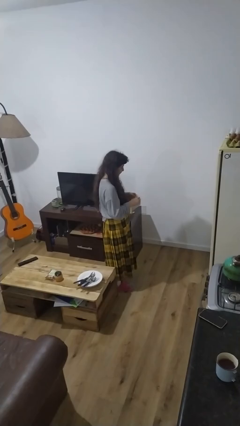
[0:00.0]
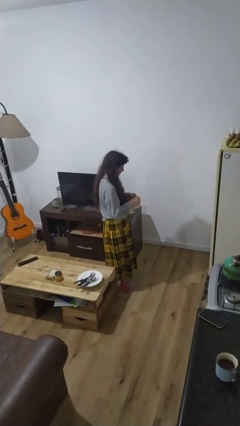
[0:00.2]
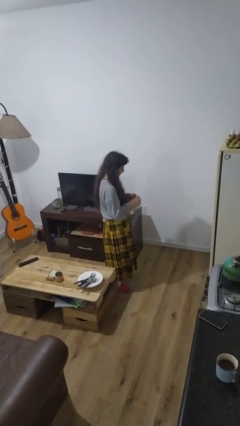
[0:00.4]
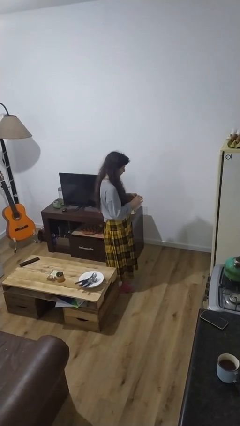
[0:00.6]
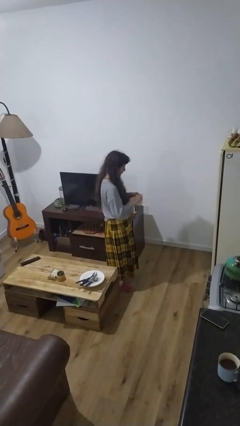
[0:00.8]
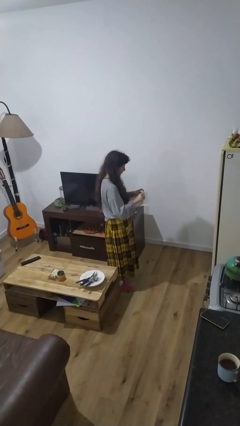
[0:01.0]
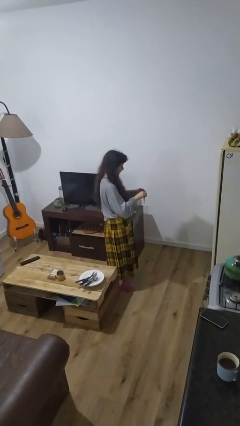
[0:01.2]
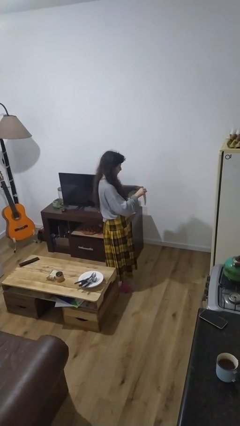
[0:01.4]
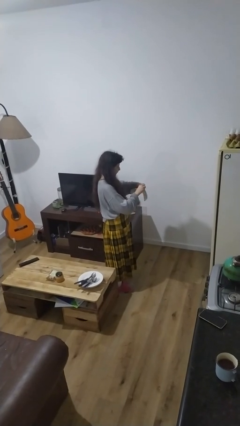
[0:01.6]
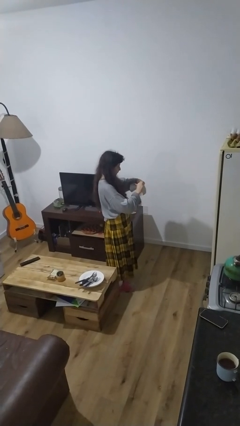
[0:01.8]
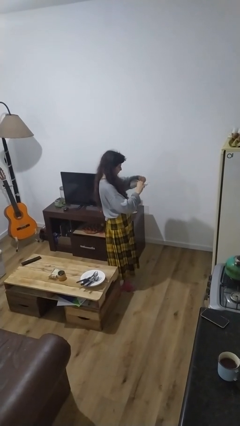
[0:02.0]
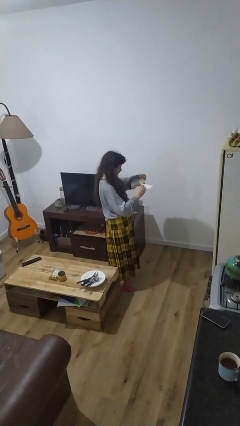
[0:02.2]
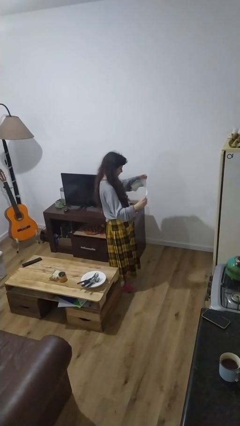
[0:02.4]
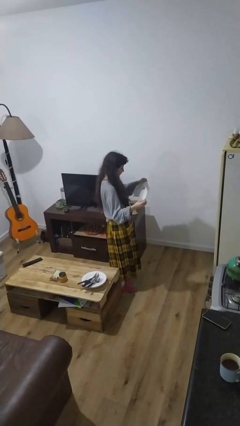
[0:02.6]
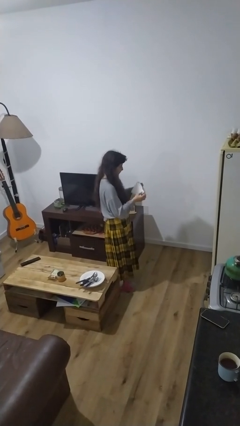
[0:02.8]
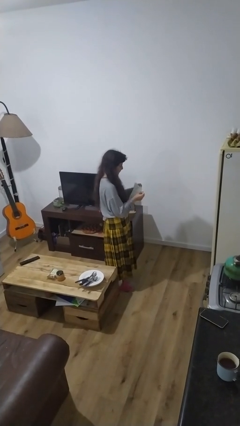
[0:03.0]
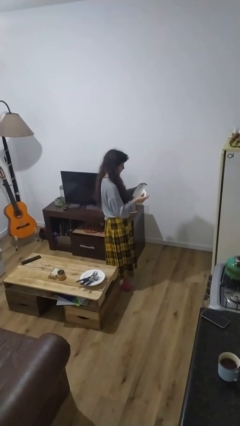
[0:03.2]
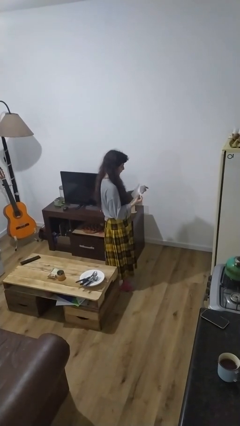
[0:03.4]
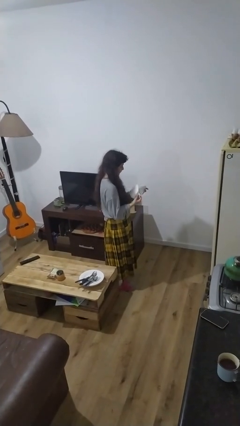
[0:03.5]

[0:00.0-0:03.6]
person tears paper

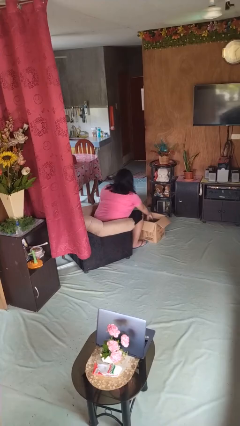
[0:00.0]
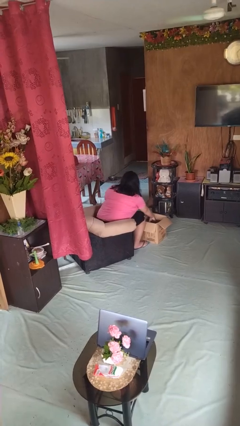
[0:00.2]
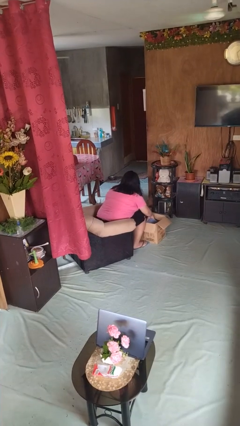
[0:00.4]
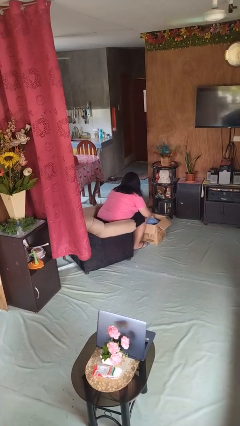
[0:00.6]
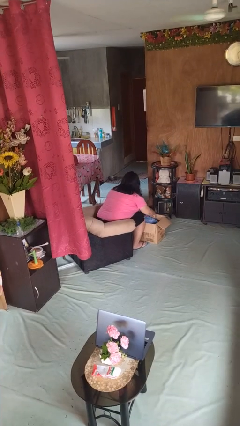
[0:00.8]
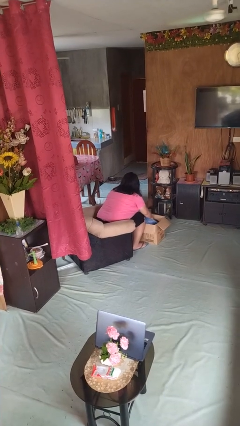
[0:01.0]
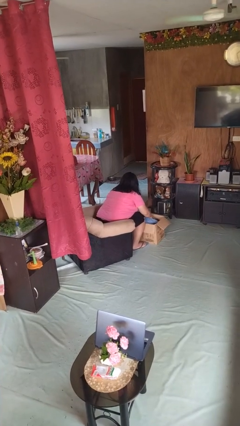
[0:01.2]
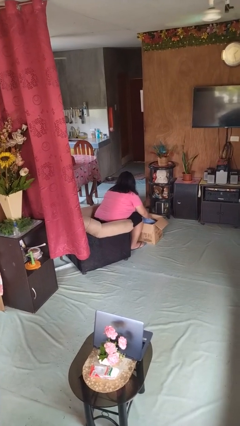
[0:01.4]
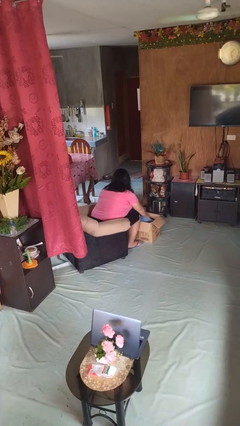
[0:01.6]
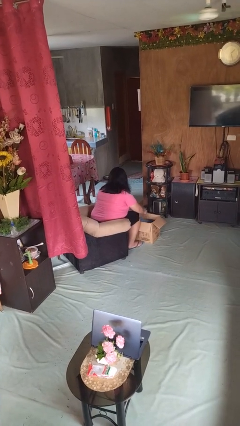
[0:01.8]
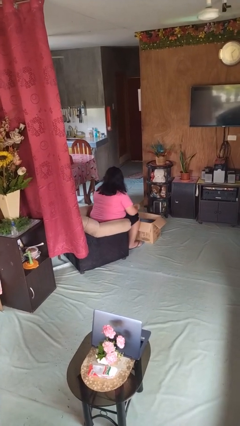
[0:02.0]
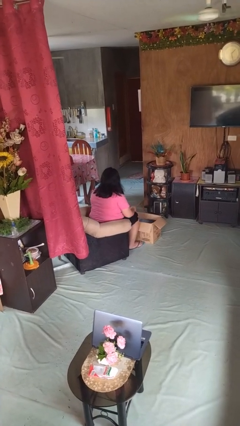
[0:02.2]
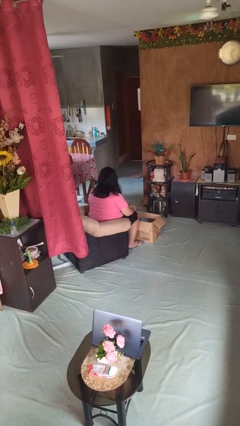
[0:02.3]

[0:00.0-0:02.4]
person searches in box

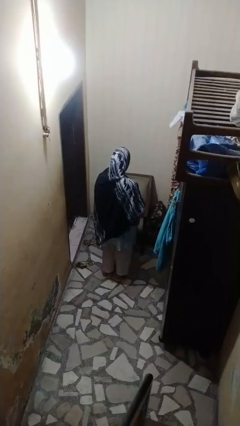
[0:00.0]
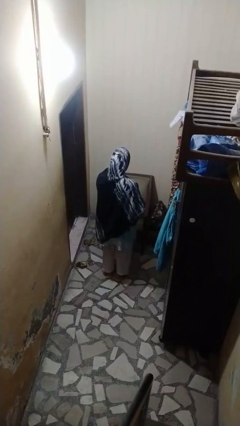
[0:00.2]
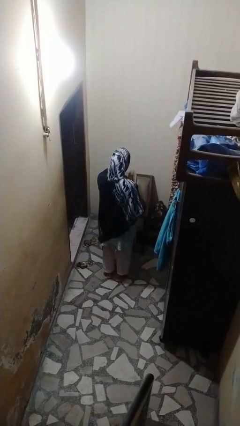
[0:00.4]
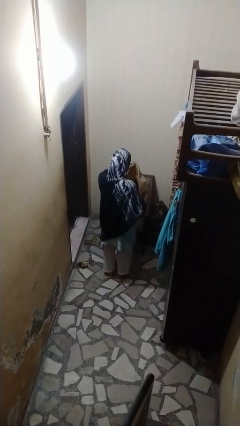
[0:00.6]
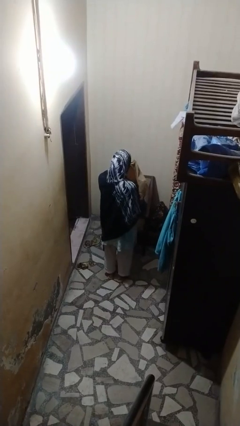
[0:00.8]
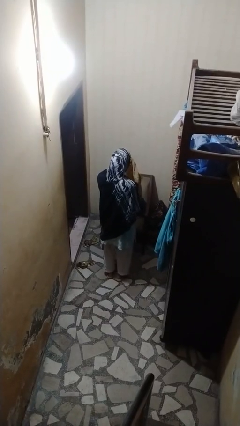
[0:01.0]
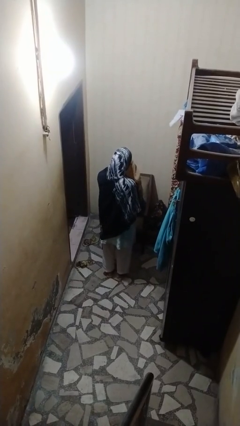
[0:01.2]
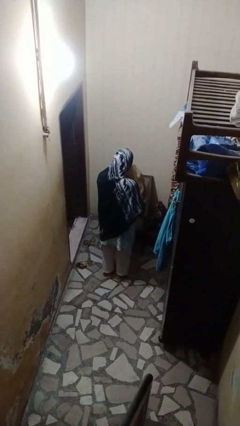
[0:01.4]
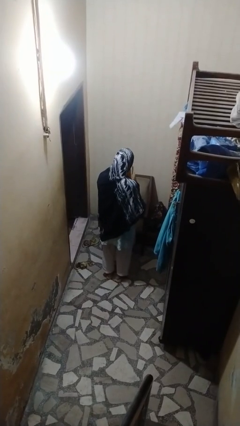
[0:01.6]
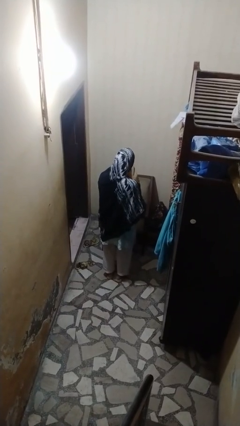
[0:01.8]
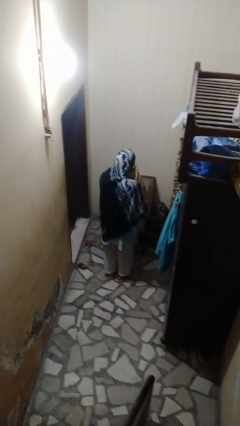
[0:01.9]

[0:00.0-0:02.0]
person searches in bag

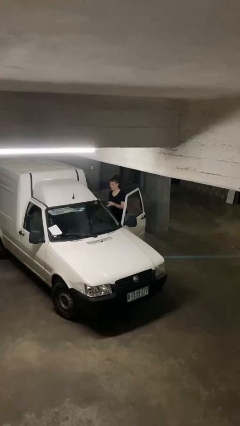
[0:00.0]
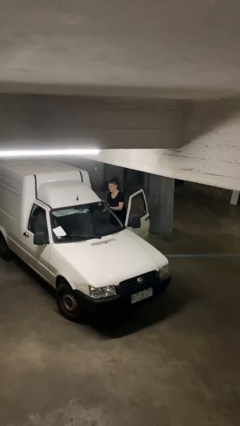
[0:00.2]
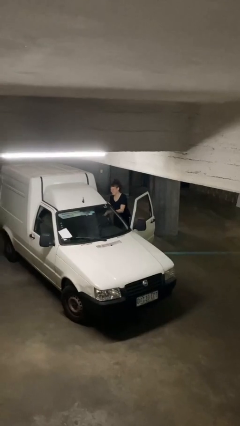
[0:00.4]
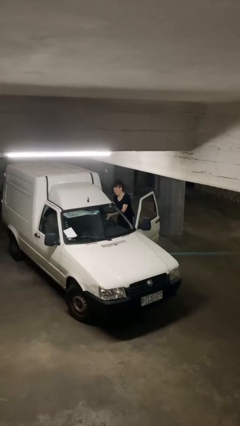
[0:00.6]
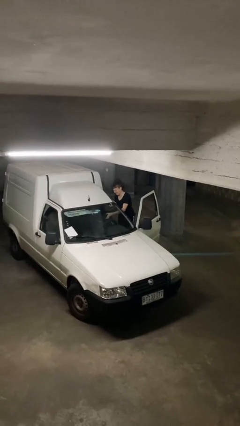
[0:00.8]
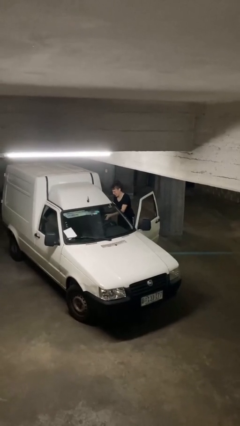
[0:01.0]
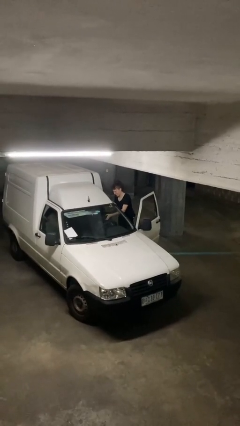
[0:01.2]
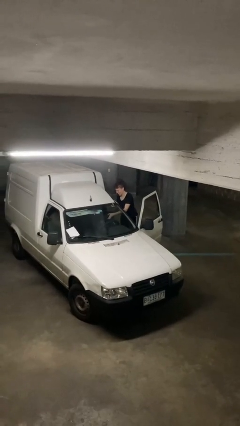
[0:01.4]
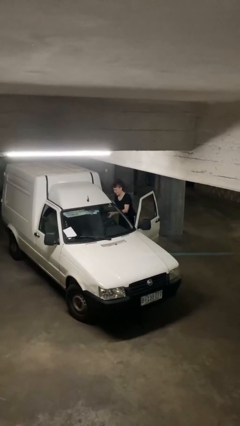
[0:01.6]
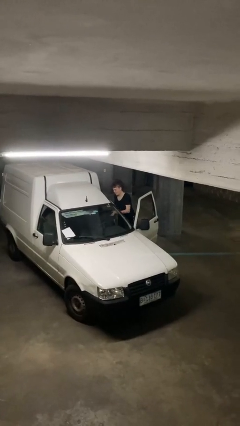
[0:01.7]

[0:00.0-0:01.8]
person loads car

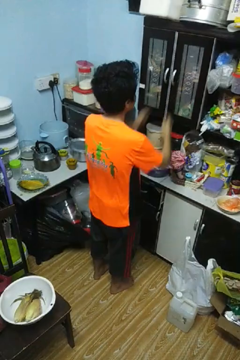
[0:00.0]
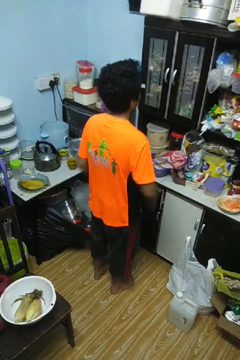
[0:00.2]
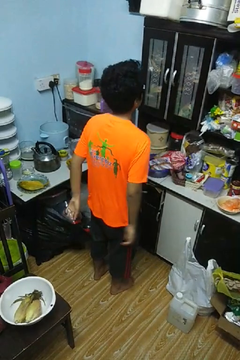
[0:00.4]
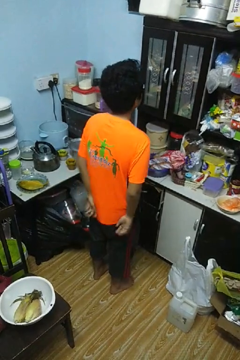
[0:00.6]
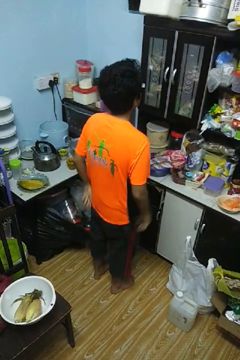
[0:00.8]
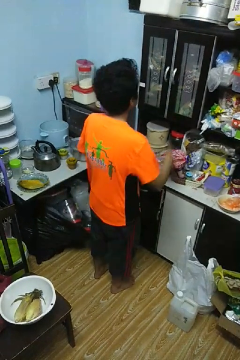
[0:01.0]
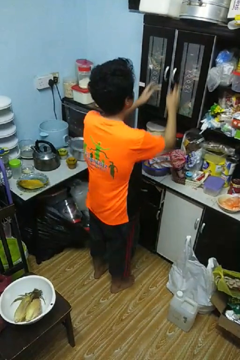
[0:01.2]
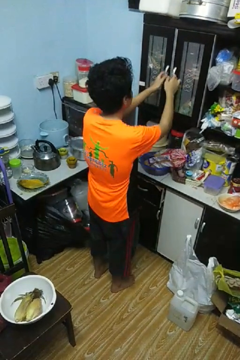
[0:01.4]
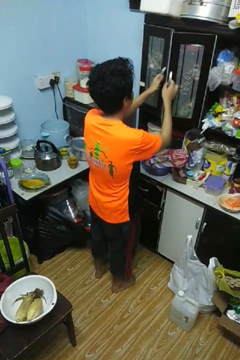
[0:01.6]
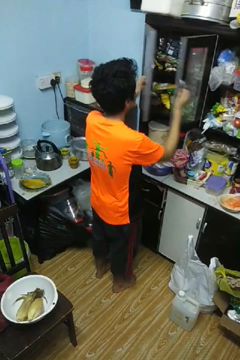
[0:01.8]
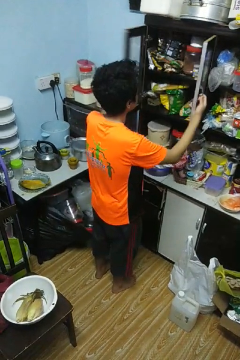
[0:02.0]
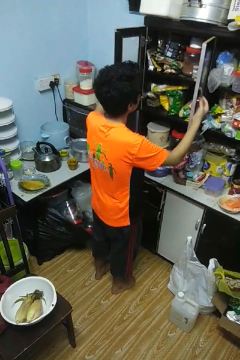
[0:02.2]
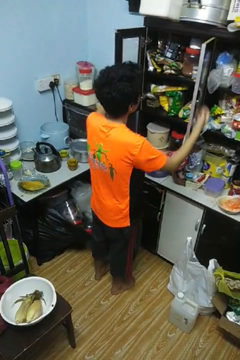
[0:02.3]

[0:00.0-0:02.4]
person opens cabinet

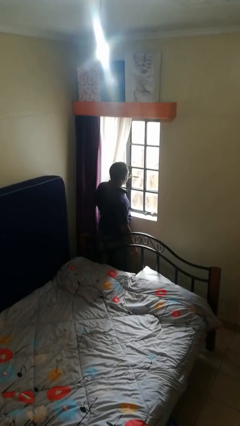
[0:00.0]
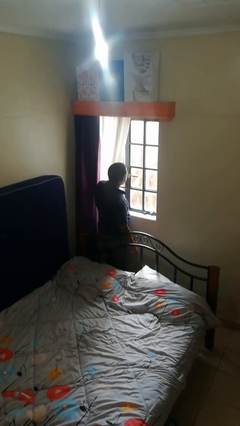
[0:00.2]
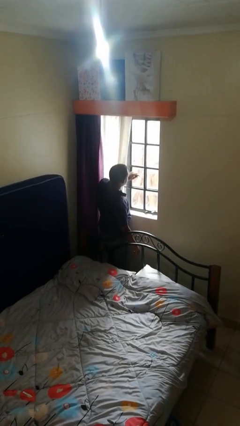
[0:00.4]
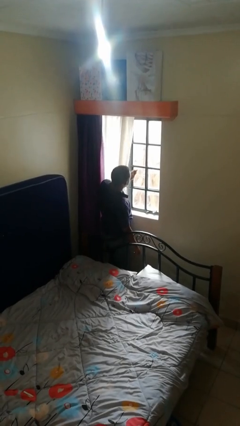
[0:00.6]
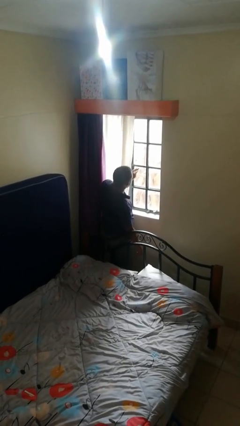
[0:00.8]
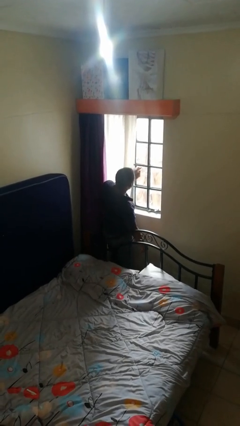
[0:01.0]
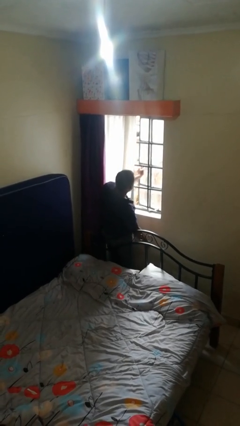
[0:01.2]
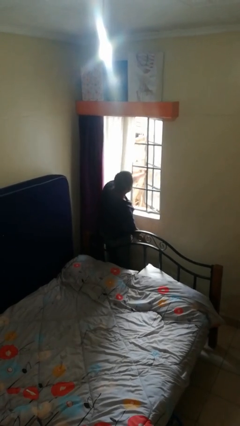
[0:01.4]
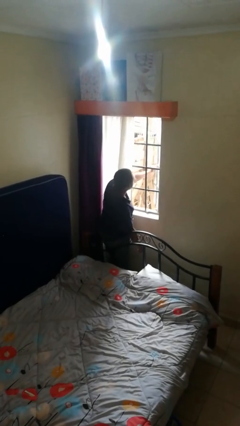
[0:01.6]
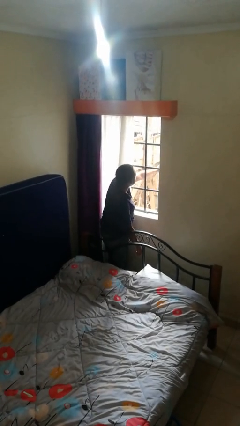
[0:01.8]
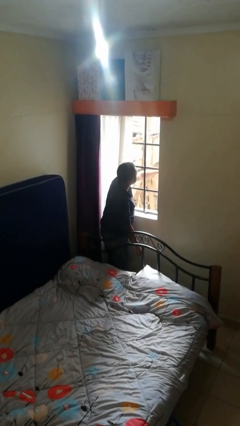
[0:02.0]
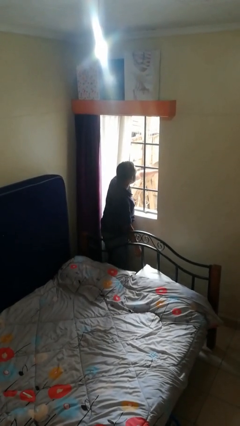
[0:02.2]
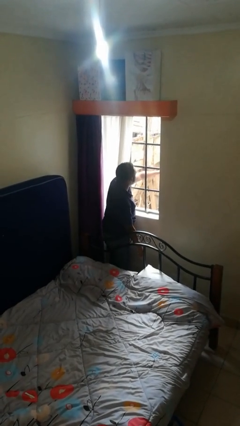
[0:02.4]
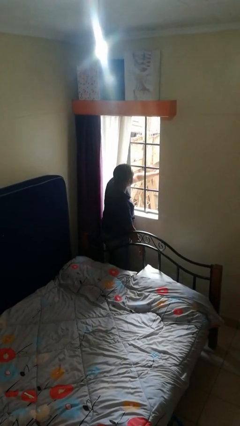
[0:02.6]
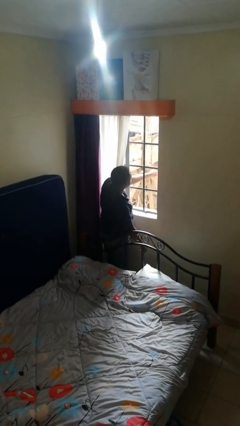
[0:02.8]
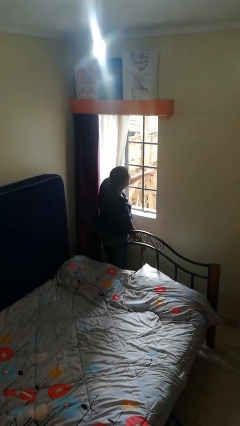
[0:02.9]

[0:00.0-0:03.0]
person opens home window

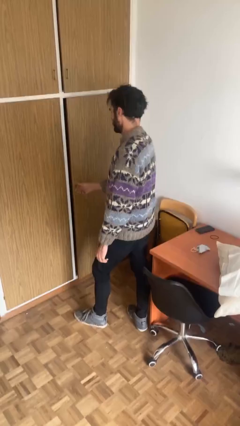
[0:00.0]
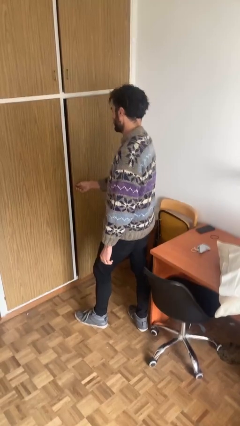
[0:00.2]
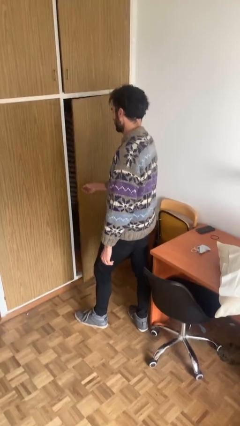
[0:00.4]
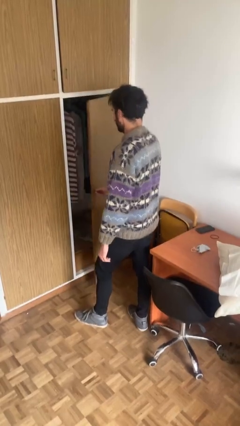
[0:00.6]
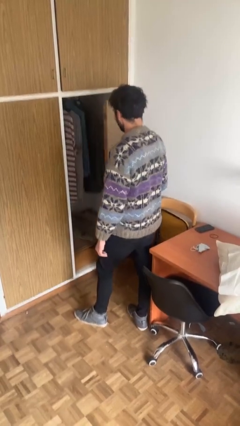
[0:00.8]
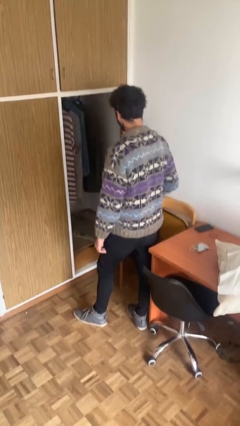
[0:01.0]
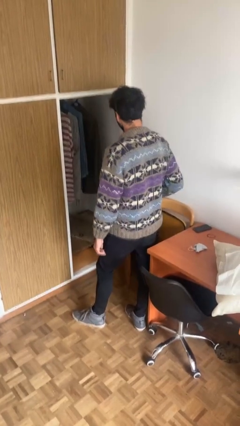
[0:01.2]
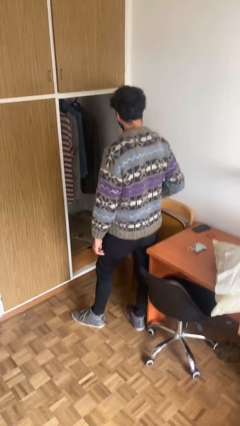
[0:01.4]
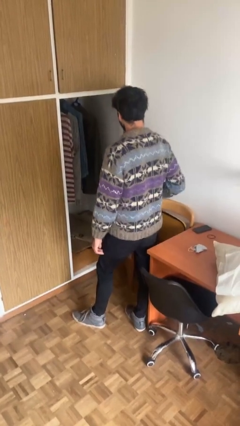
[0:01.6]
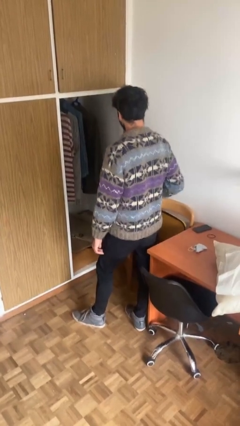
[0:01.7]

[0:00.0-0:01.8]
person opens closet door

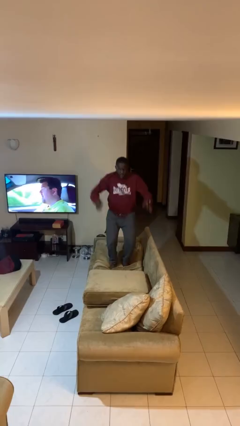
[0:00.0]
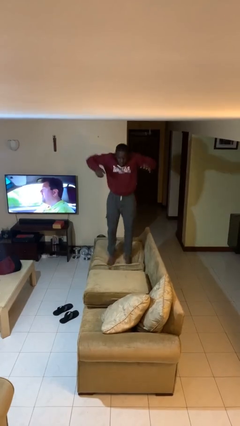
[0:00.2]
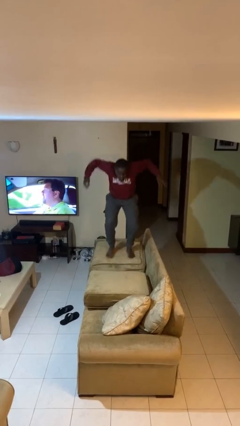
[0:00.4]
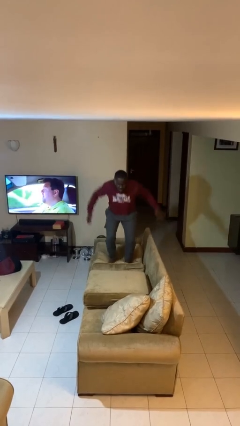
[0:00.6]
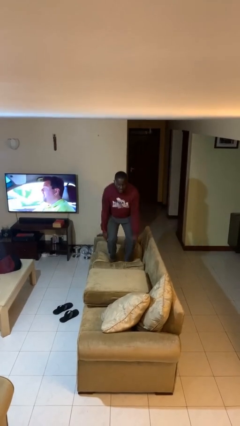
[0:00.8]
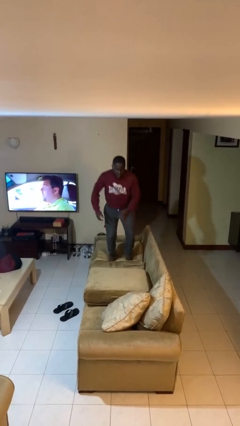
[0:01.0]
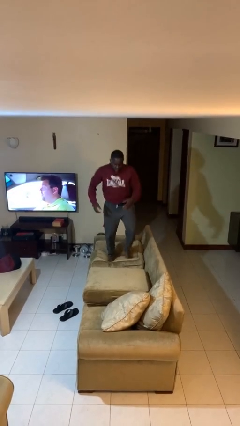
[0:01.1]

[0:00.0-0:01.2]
person jumps on couch
